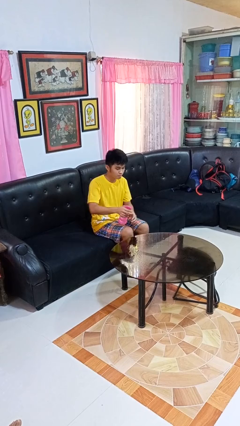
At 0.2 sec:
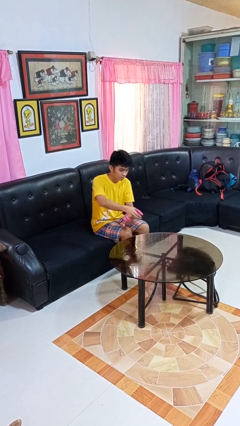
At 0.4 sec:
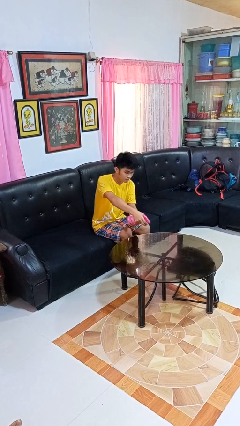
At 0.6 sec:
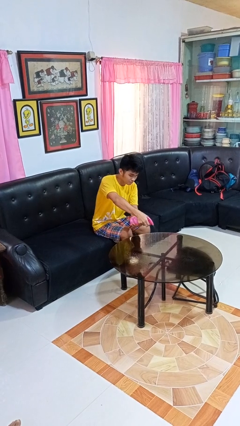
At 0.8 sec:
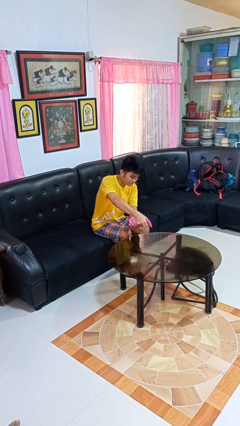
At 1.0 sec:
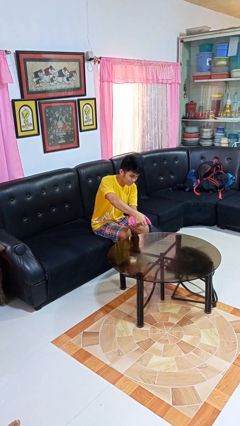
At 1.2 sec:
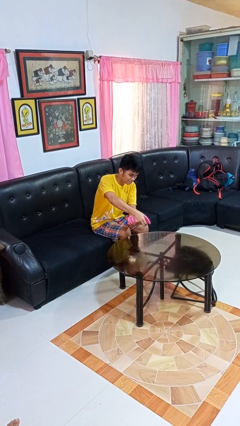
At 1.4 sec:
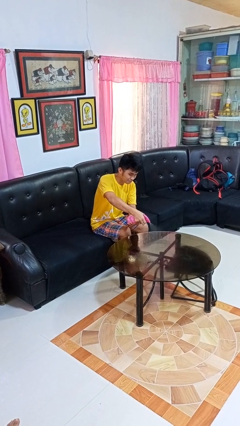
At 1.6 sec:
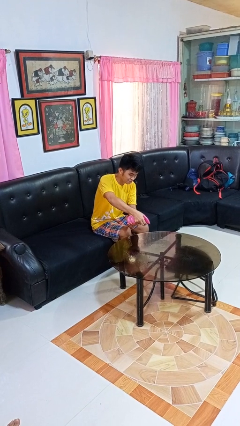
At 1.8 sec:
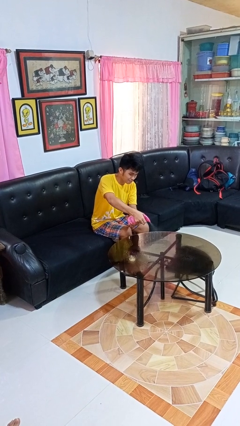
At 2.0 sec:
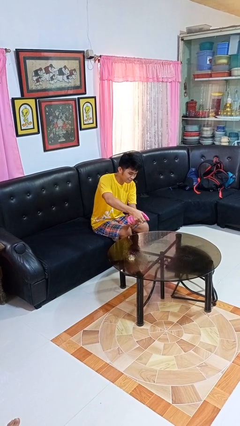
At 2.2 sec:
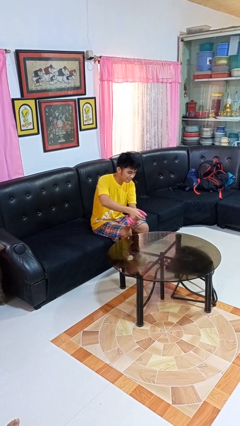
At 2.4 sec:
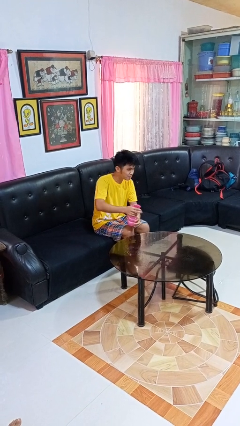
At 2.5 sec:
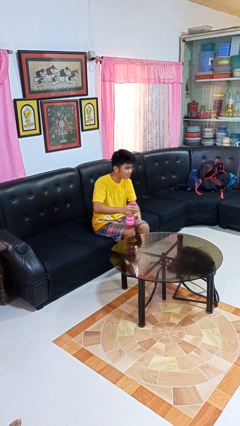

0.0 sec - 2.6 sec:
person sprays from bottle

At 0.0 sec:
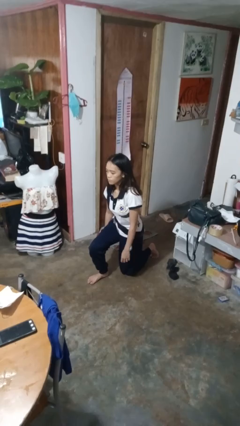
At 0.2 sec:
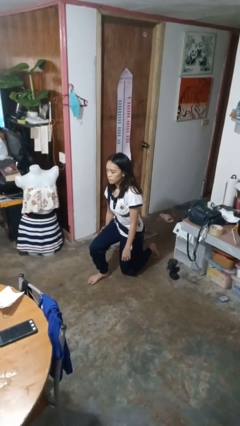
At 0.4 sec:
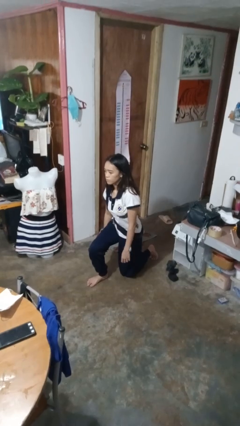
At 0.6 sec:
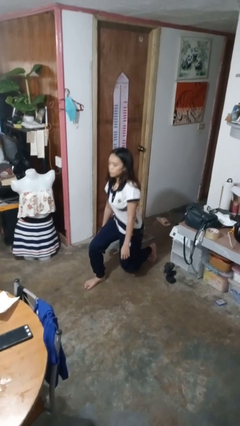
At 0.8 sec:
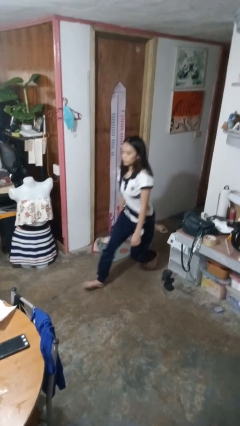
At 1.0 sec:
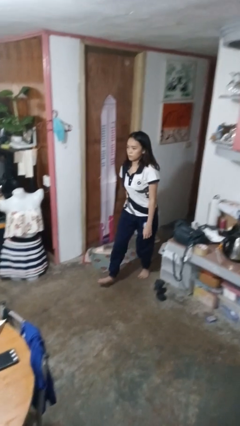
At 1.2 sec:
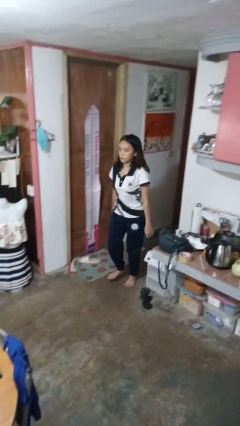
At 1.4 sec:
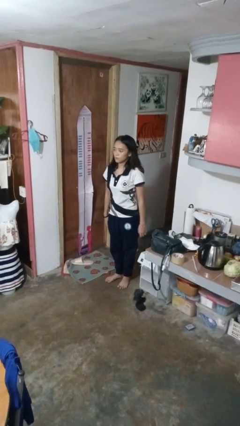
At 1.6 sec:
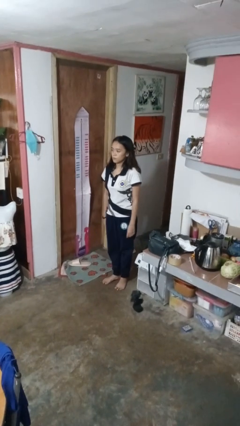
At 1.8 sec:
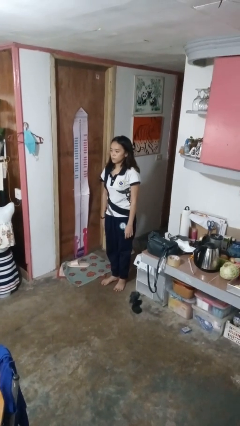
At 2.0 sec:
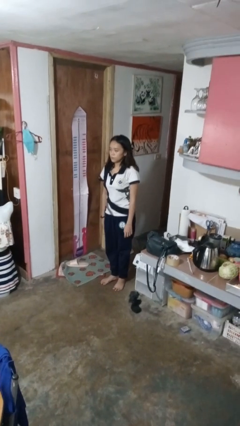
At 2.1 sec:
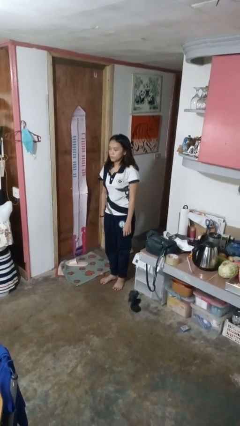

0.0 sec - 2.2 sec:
person stands up from floor

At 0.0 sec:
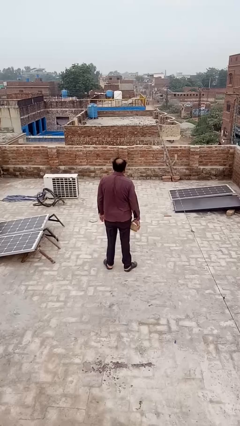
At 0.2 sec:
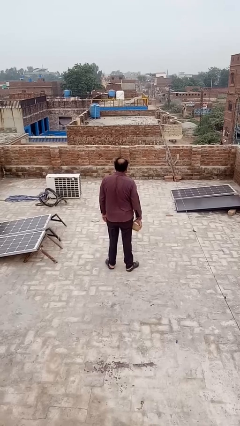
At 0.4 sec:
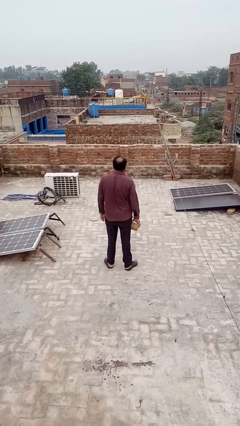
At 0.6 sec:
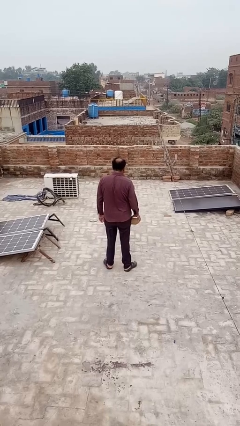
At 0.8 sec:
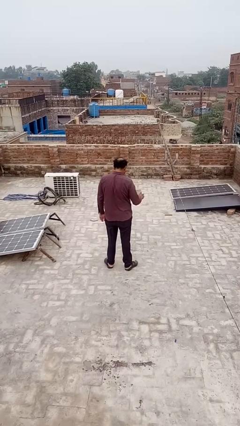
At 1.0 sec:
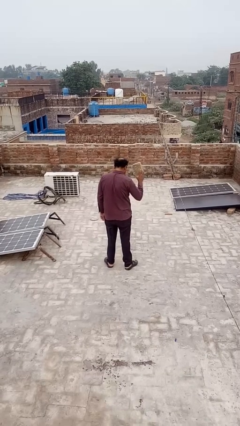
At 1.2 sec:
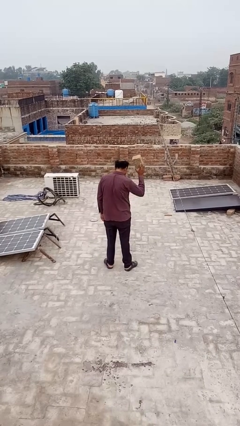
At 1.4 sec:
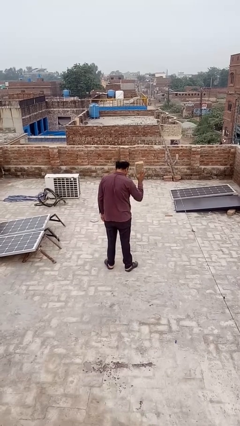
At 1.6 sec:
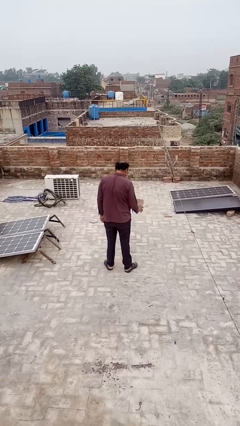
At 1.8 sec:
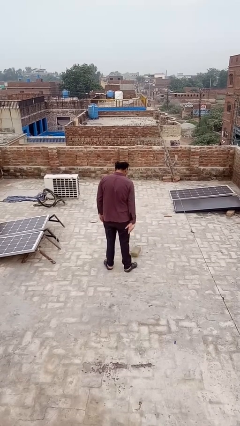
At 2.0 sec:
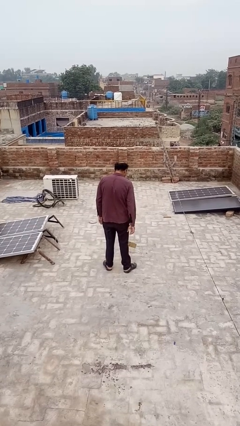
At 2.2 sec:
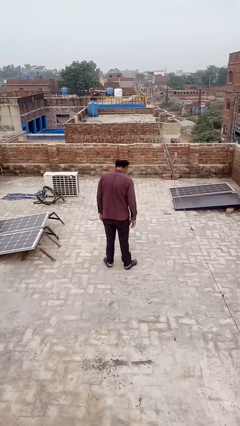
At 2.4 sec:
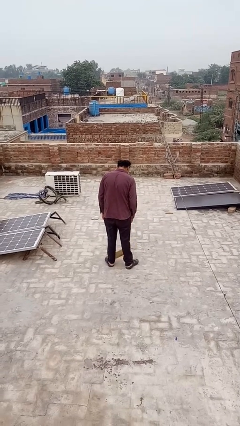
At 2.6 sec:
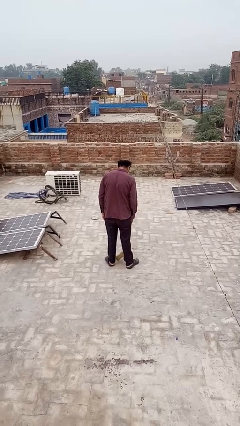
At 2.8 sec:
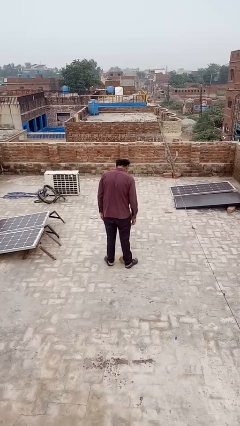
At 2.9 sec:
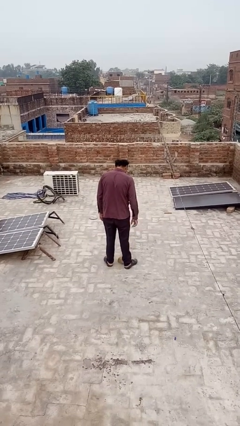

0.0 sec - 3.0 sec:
person throws object to ground

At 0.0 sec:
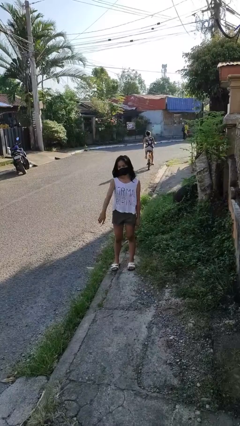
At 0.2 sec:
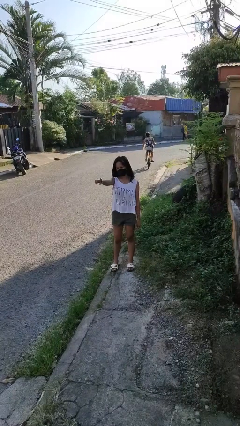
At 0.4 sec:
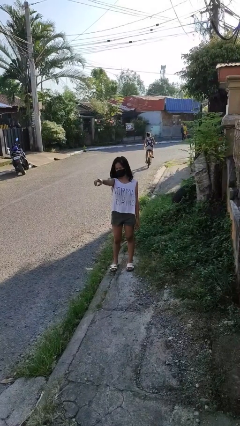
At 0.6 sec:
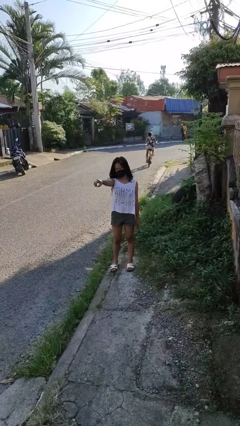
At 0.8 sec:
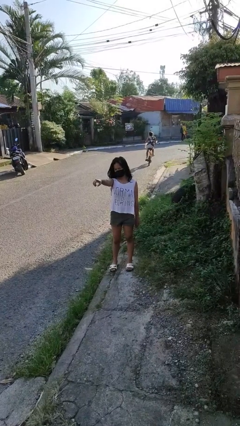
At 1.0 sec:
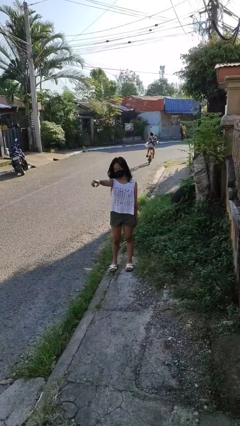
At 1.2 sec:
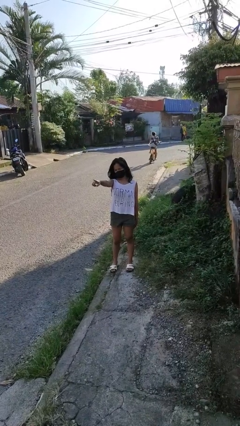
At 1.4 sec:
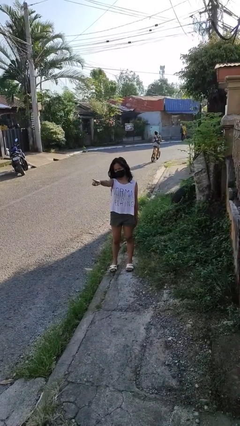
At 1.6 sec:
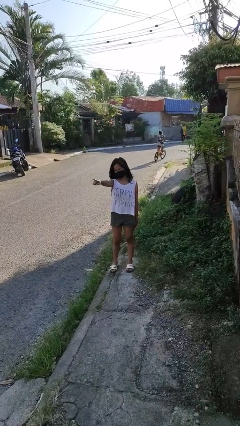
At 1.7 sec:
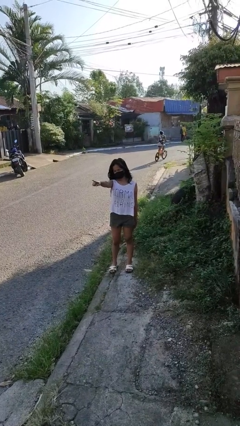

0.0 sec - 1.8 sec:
person points at person

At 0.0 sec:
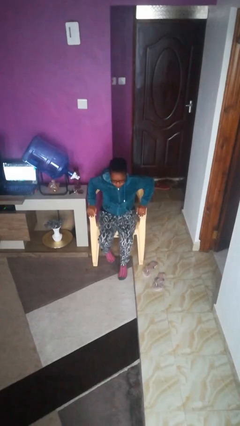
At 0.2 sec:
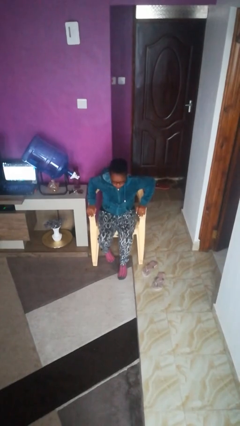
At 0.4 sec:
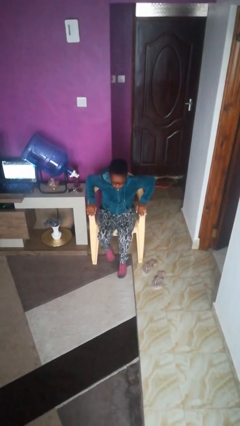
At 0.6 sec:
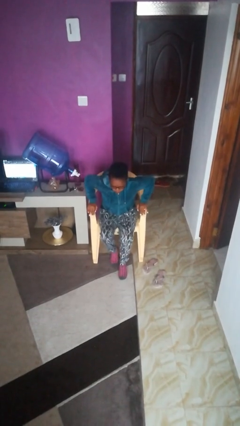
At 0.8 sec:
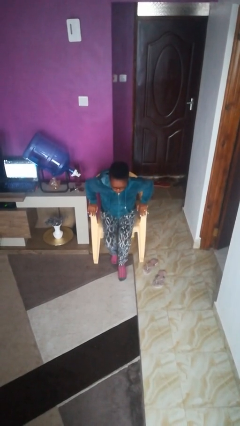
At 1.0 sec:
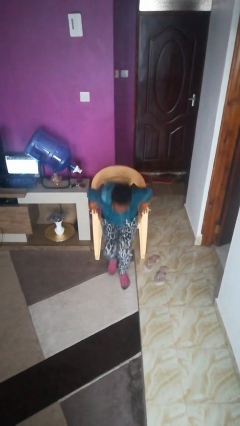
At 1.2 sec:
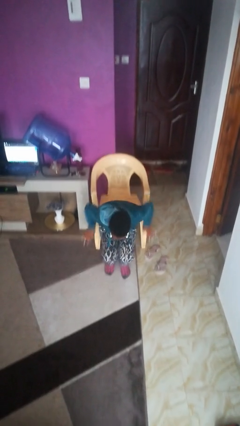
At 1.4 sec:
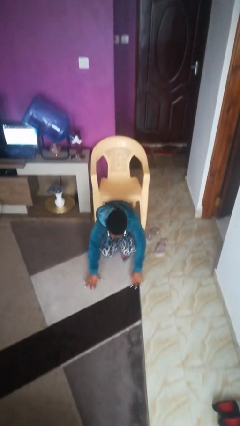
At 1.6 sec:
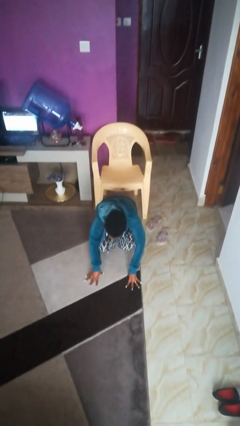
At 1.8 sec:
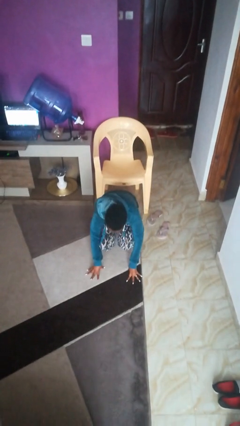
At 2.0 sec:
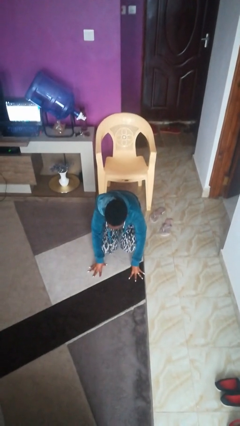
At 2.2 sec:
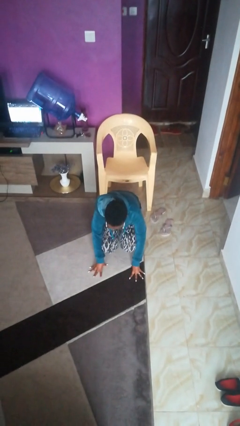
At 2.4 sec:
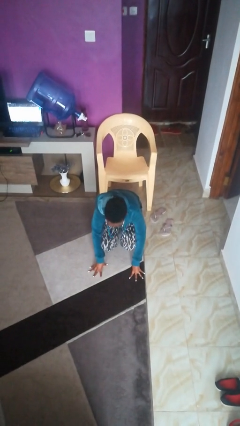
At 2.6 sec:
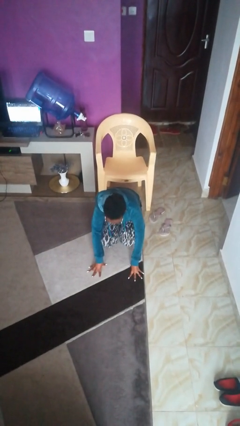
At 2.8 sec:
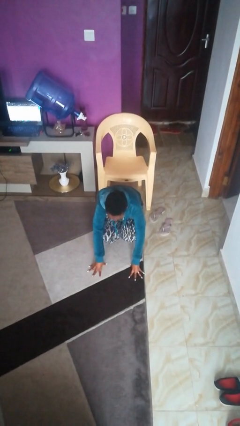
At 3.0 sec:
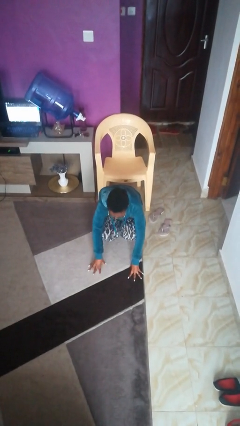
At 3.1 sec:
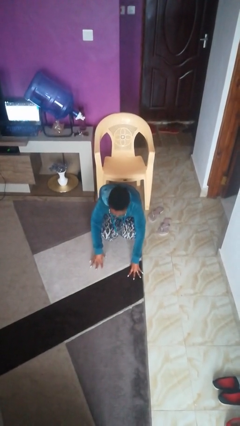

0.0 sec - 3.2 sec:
person falls from chair

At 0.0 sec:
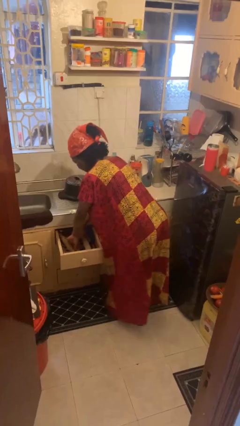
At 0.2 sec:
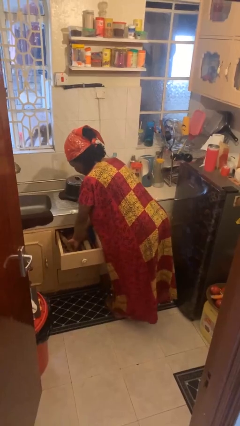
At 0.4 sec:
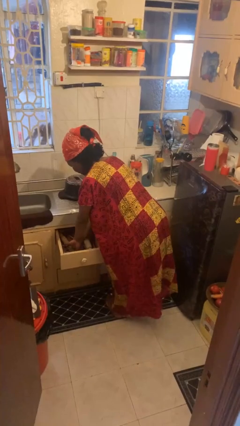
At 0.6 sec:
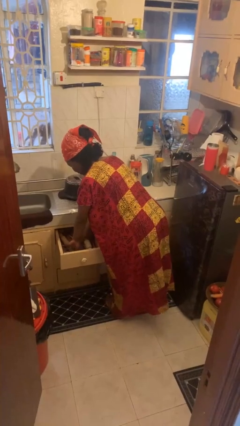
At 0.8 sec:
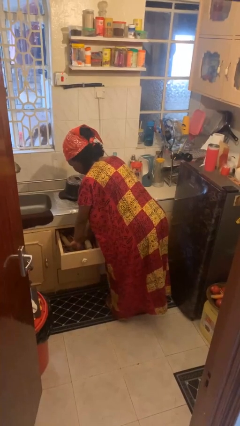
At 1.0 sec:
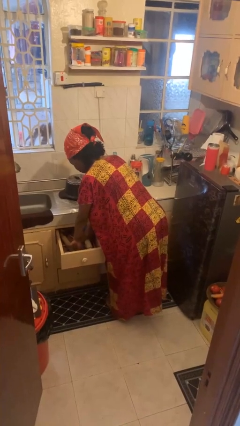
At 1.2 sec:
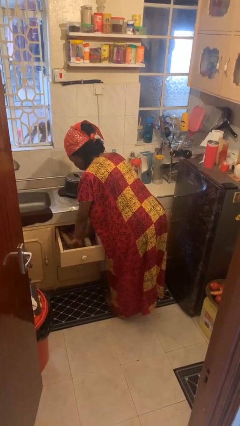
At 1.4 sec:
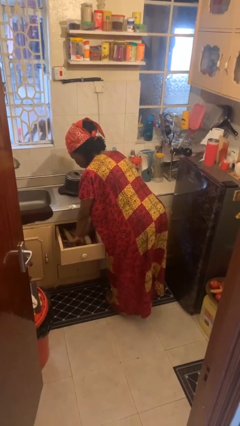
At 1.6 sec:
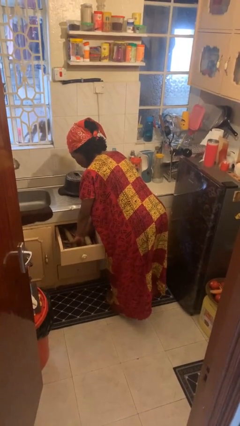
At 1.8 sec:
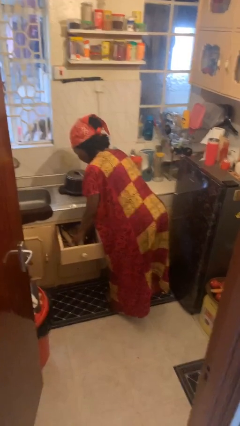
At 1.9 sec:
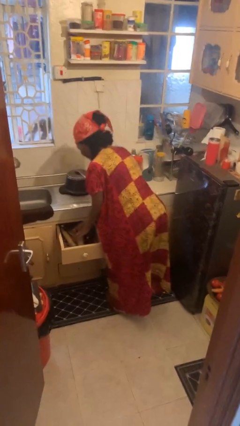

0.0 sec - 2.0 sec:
person searches in kitchen drawer

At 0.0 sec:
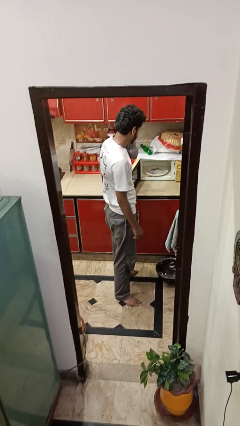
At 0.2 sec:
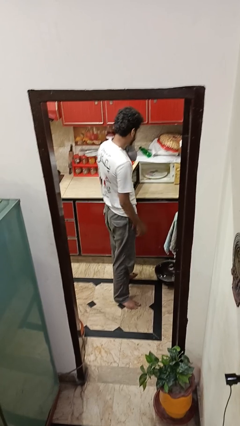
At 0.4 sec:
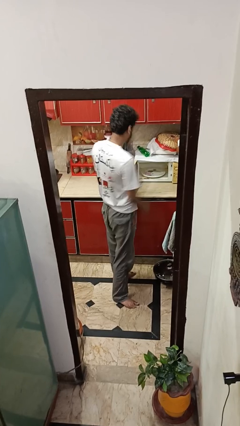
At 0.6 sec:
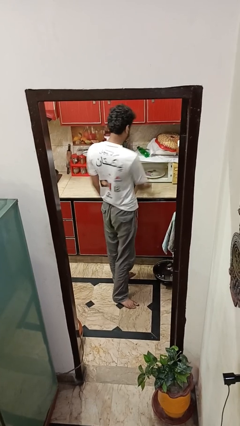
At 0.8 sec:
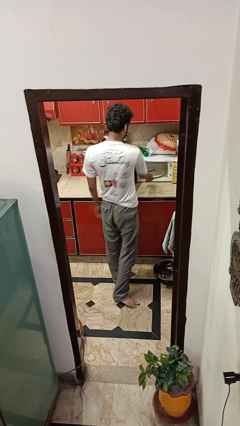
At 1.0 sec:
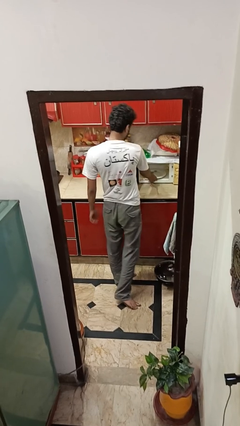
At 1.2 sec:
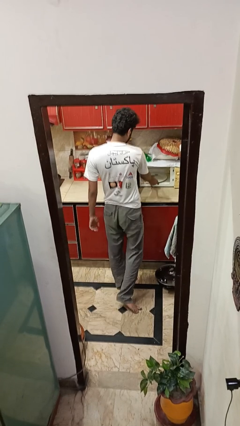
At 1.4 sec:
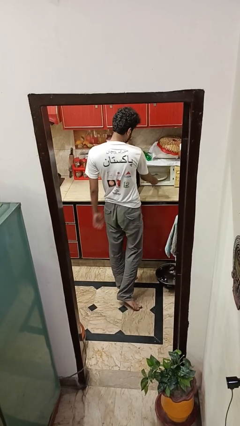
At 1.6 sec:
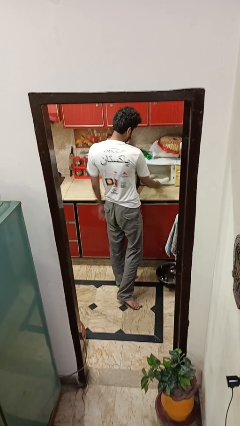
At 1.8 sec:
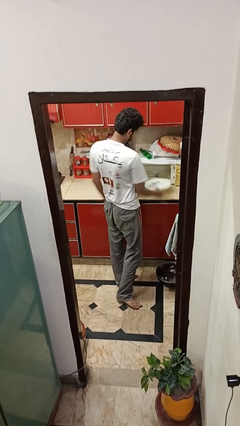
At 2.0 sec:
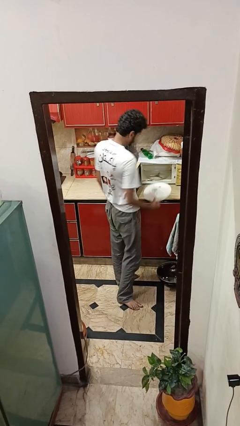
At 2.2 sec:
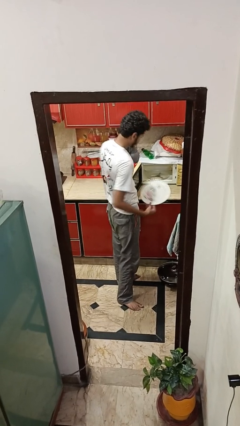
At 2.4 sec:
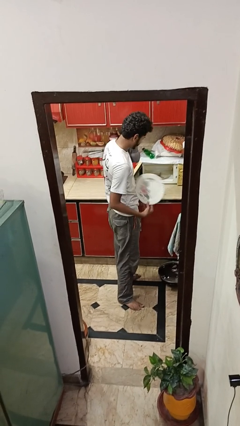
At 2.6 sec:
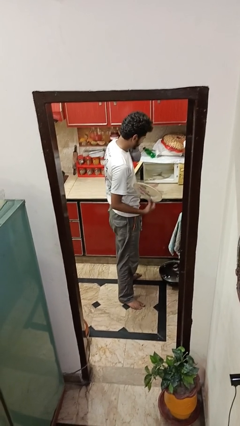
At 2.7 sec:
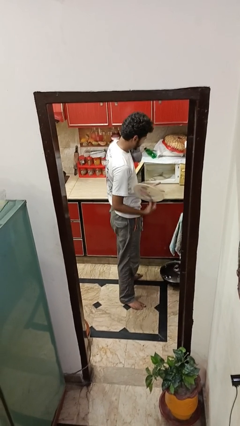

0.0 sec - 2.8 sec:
person takes object from oven
